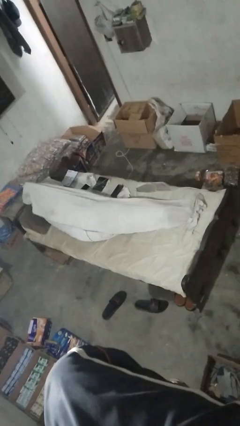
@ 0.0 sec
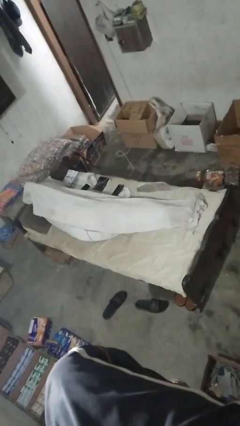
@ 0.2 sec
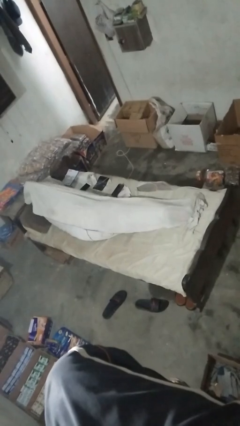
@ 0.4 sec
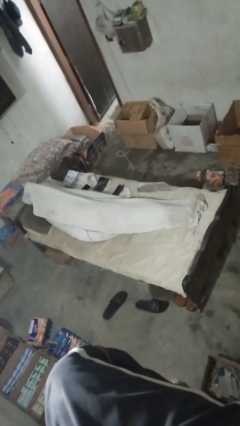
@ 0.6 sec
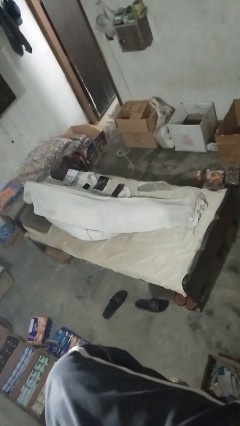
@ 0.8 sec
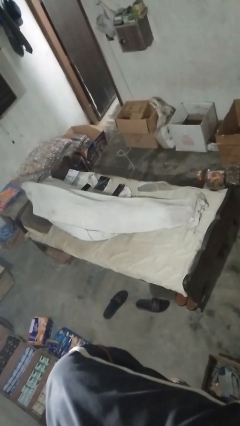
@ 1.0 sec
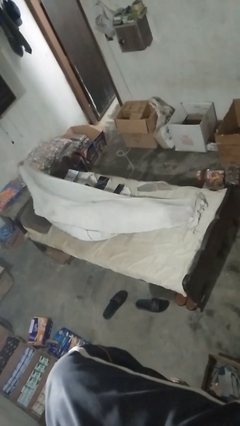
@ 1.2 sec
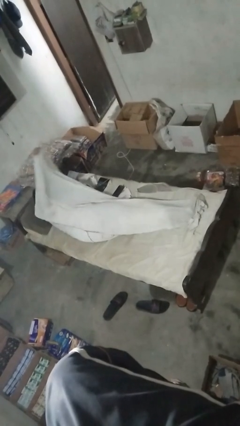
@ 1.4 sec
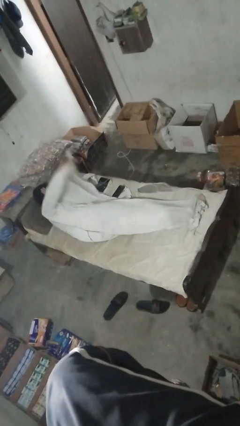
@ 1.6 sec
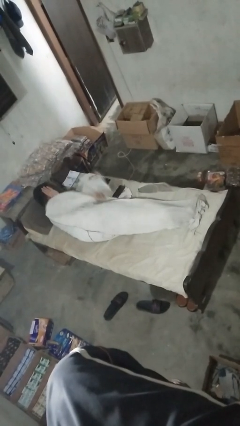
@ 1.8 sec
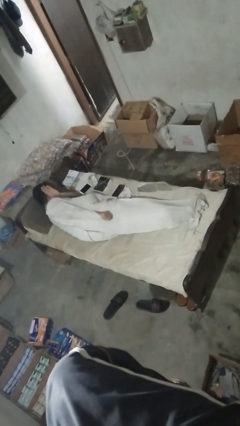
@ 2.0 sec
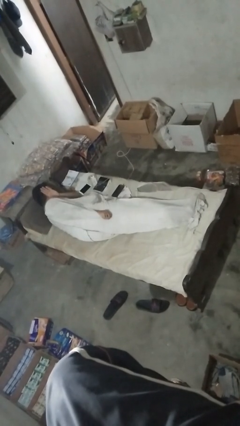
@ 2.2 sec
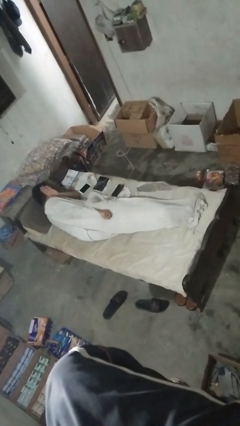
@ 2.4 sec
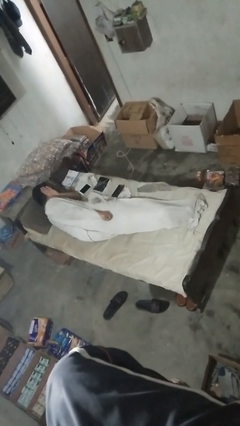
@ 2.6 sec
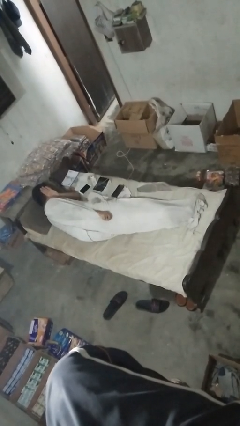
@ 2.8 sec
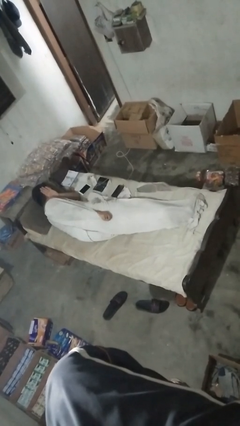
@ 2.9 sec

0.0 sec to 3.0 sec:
person uncovers with bedsheets

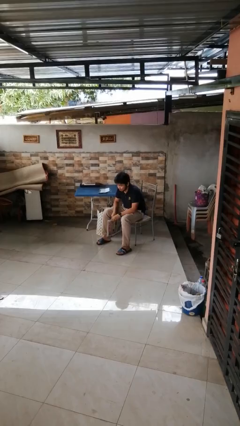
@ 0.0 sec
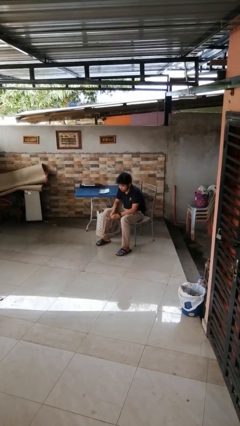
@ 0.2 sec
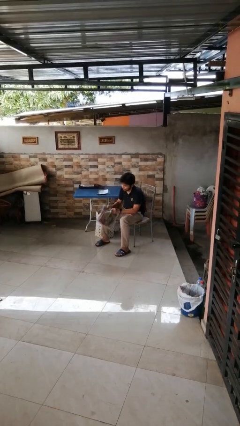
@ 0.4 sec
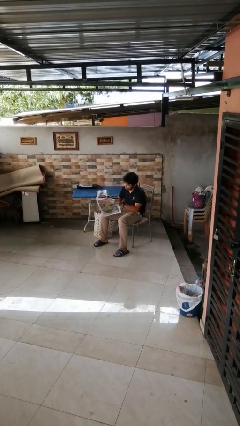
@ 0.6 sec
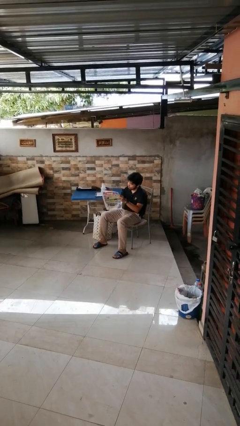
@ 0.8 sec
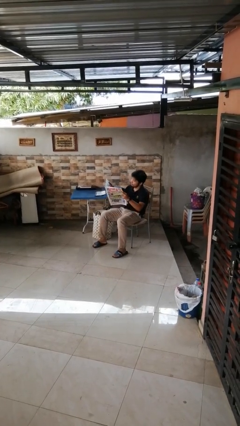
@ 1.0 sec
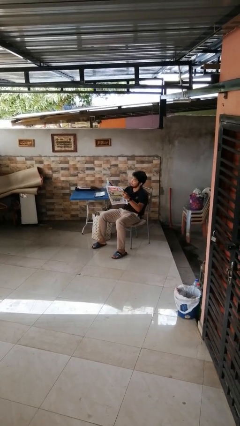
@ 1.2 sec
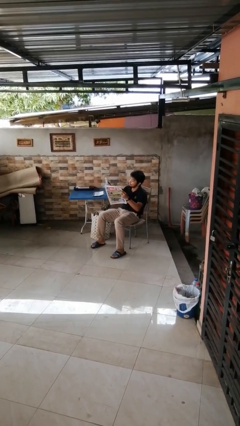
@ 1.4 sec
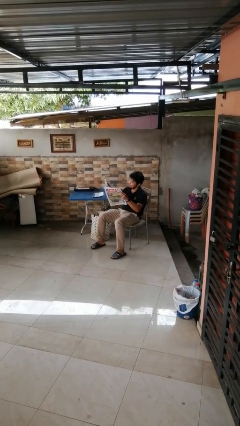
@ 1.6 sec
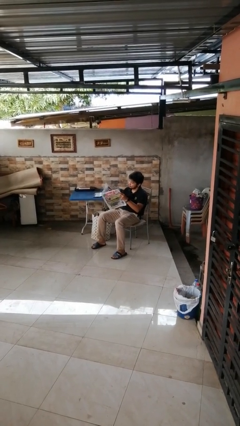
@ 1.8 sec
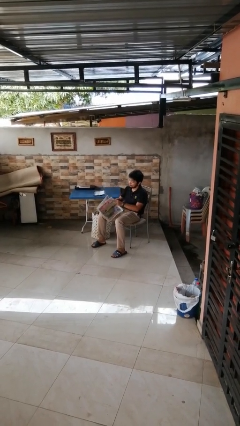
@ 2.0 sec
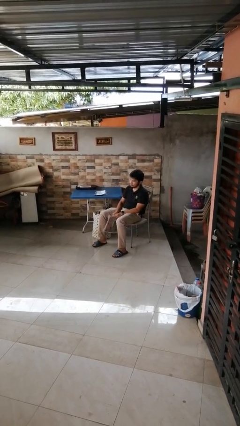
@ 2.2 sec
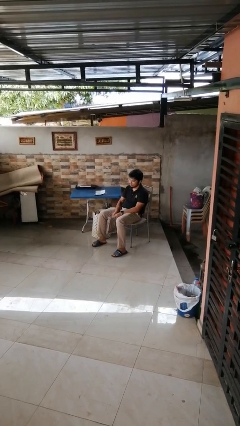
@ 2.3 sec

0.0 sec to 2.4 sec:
person reads newspaper

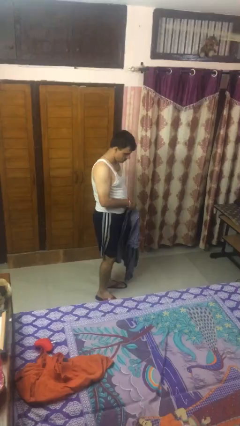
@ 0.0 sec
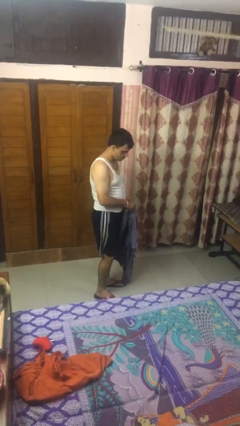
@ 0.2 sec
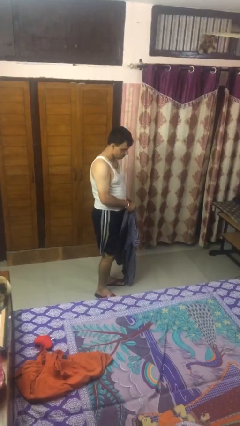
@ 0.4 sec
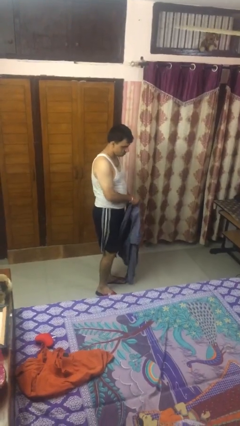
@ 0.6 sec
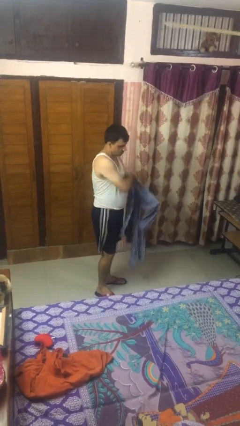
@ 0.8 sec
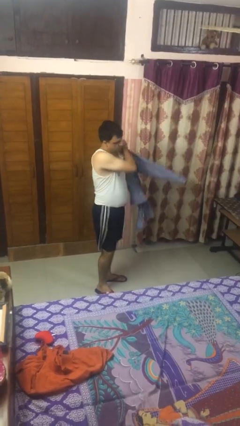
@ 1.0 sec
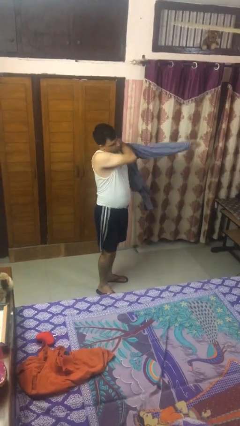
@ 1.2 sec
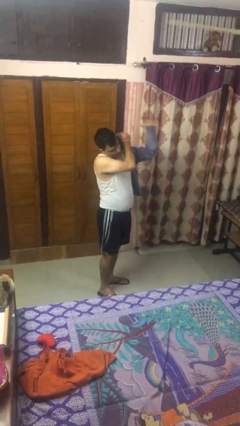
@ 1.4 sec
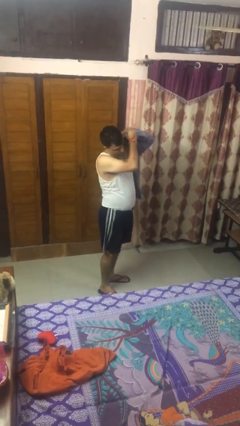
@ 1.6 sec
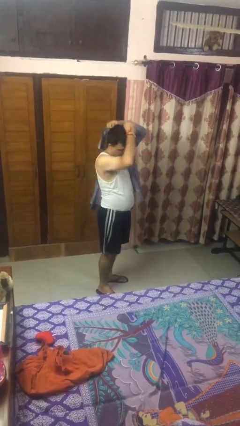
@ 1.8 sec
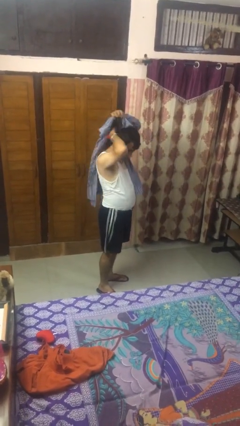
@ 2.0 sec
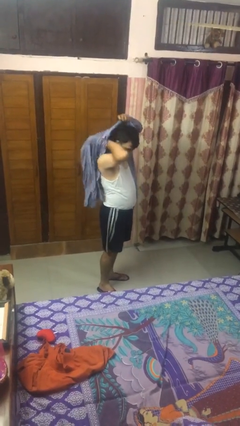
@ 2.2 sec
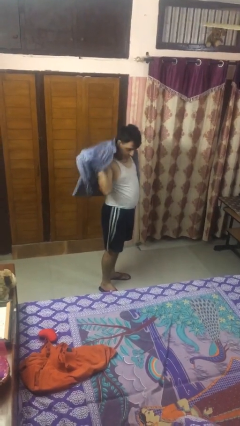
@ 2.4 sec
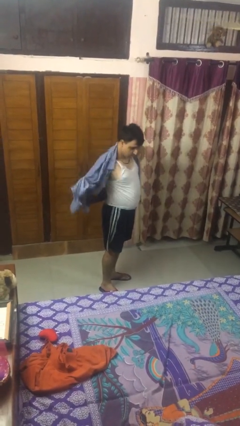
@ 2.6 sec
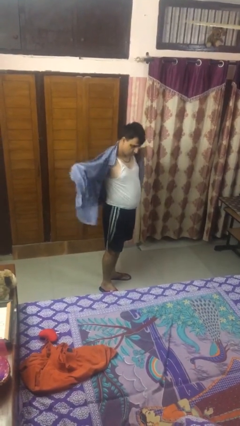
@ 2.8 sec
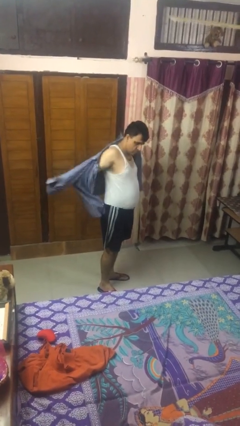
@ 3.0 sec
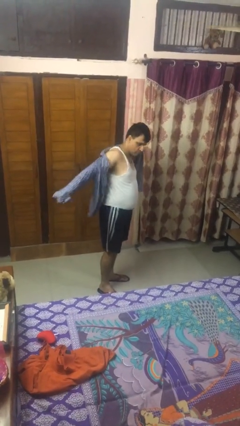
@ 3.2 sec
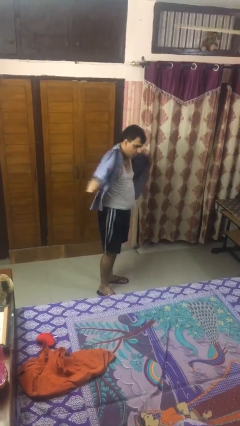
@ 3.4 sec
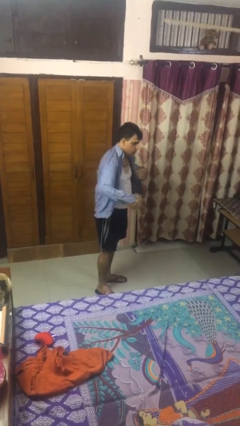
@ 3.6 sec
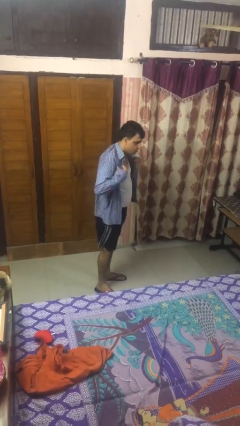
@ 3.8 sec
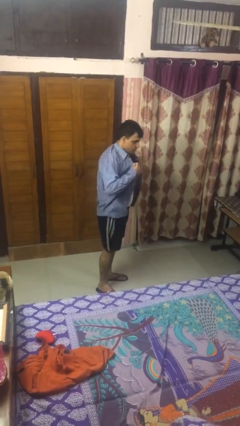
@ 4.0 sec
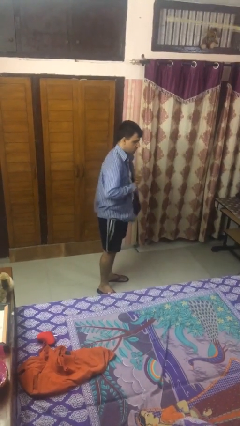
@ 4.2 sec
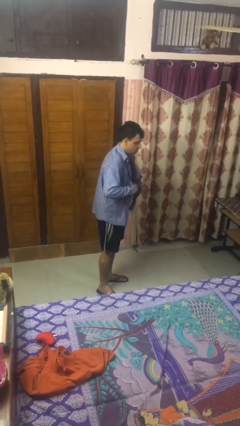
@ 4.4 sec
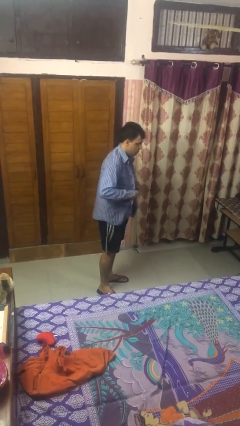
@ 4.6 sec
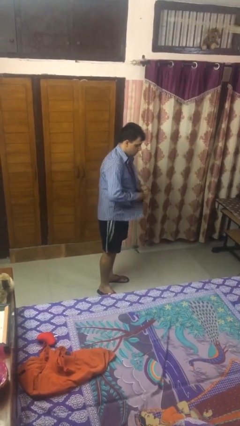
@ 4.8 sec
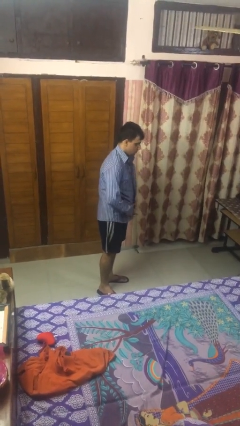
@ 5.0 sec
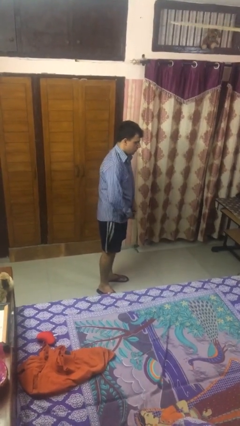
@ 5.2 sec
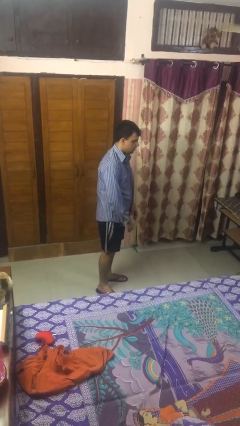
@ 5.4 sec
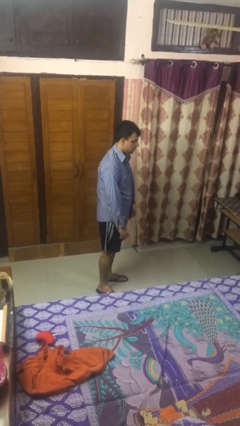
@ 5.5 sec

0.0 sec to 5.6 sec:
person puts on shirt

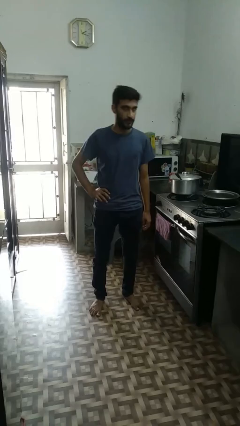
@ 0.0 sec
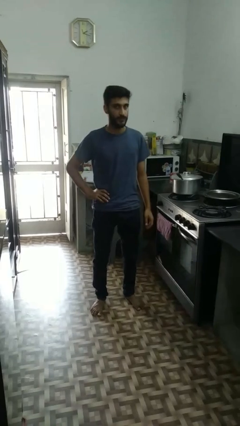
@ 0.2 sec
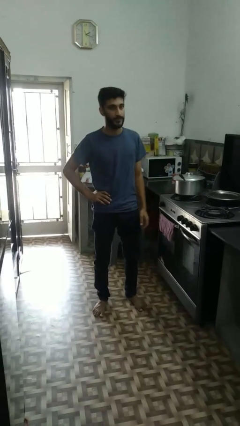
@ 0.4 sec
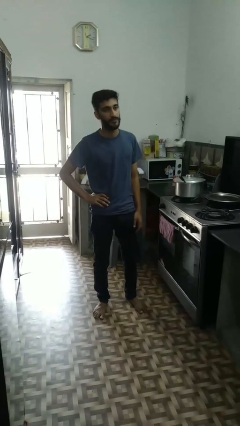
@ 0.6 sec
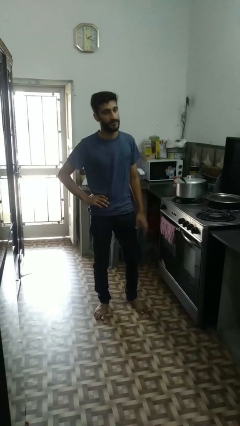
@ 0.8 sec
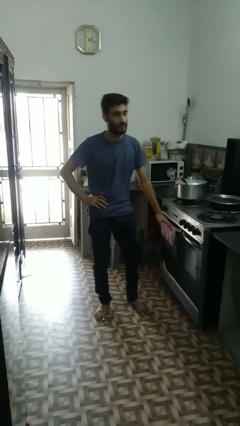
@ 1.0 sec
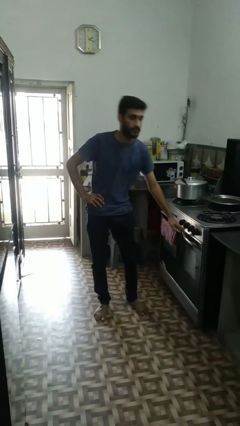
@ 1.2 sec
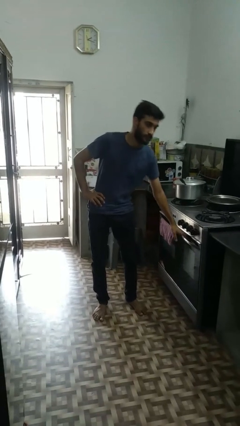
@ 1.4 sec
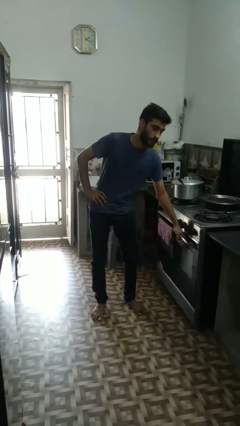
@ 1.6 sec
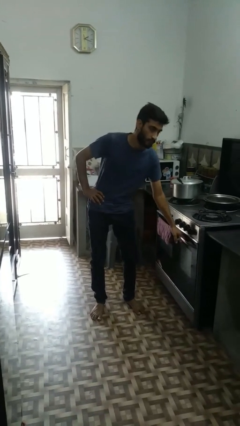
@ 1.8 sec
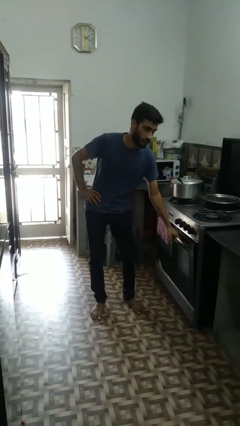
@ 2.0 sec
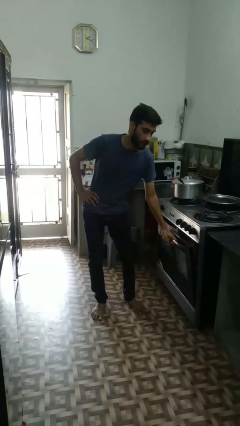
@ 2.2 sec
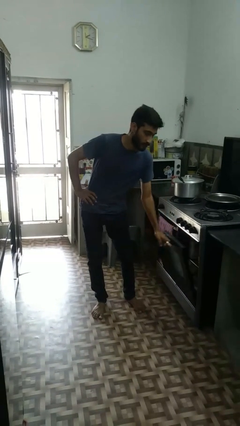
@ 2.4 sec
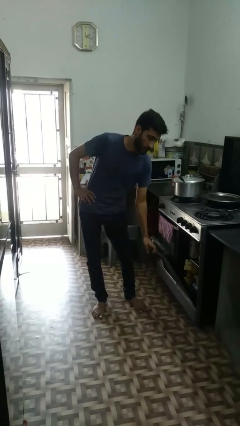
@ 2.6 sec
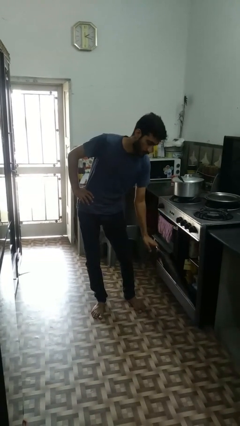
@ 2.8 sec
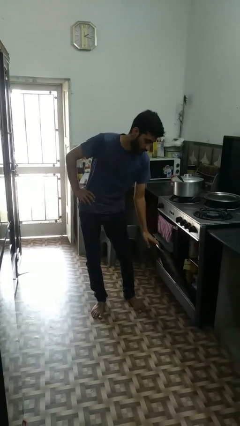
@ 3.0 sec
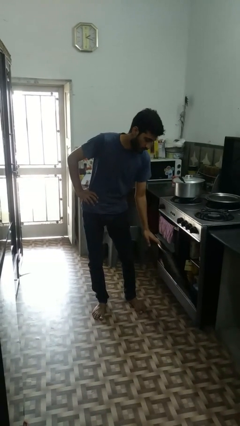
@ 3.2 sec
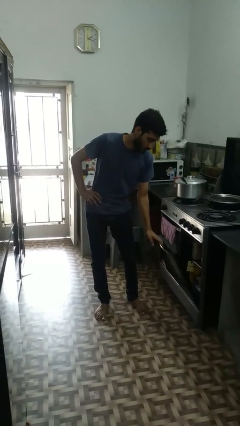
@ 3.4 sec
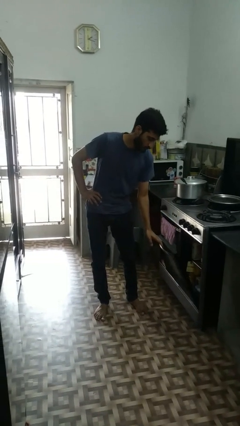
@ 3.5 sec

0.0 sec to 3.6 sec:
person opens dishwasher

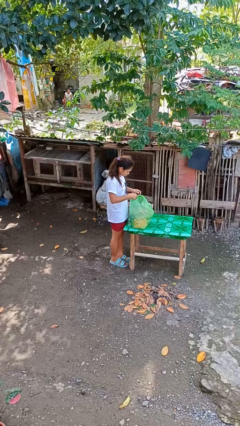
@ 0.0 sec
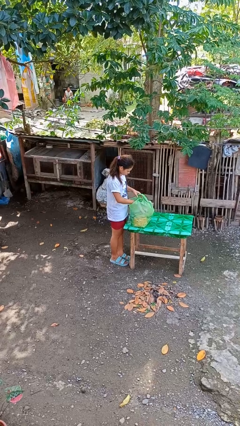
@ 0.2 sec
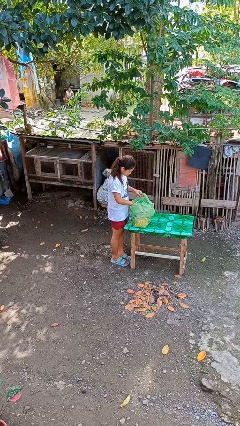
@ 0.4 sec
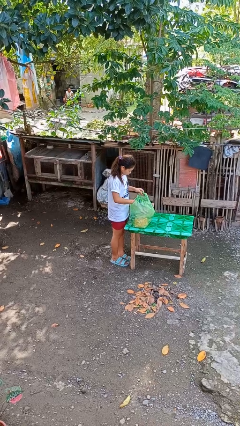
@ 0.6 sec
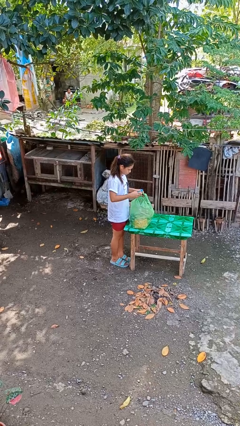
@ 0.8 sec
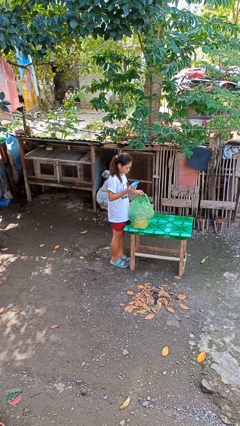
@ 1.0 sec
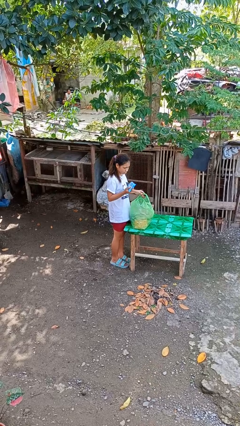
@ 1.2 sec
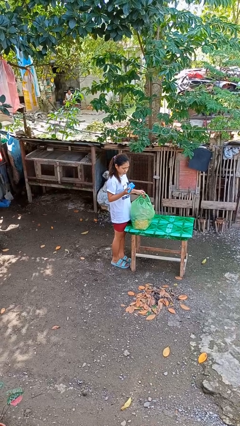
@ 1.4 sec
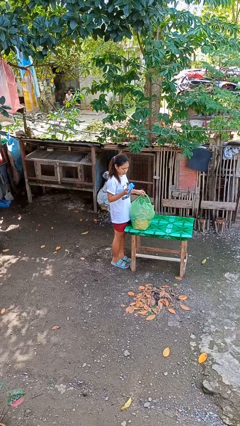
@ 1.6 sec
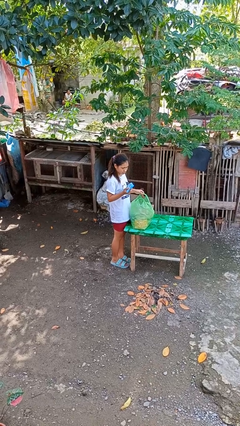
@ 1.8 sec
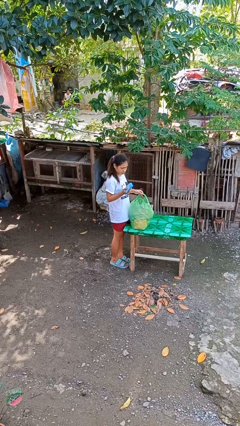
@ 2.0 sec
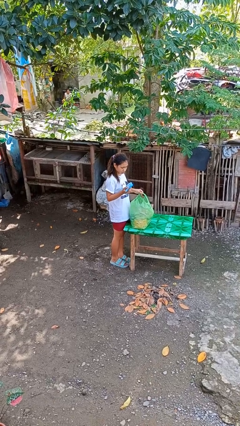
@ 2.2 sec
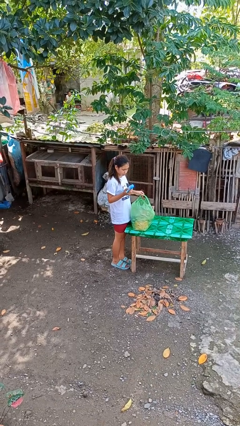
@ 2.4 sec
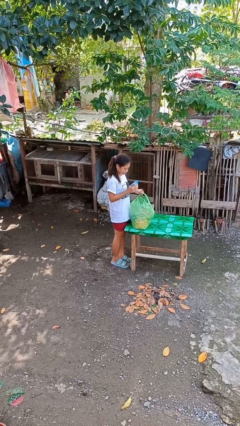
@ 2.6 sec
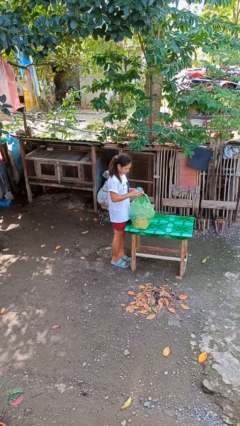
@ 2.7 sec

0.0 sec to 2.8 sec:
person takes object from bag

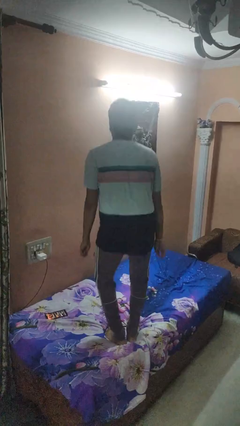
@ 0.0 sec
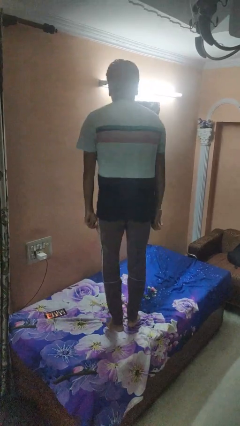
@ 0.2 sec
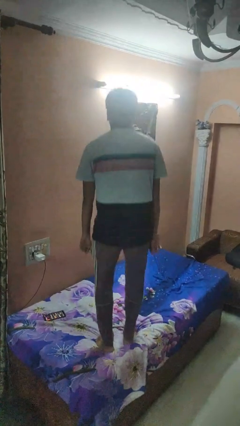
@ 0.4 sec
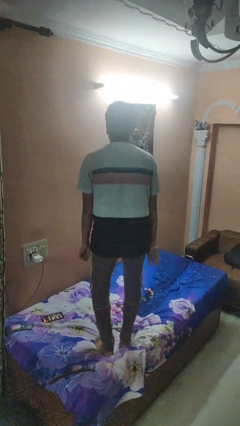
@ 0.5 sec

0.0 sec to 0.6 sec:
person jumps on bed
